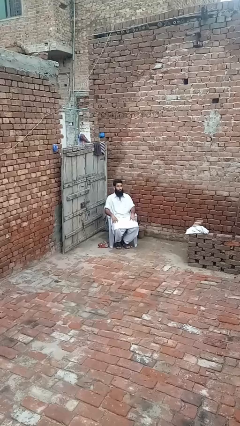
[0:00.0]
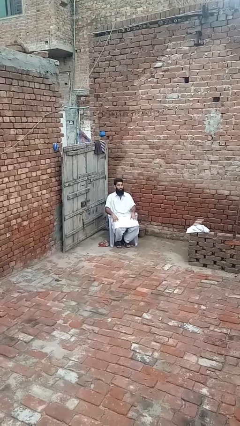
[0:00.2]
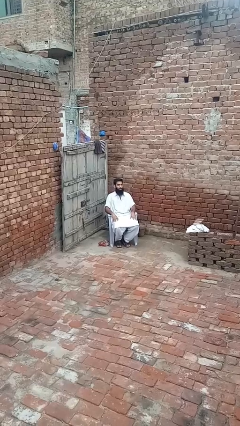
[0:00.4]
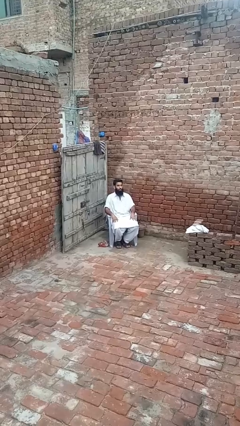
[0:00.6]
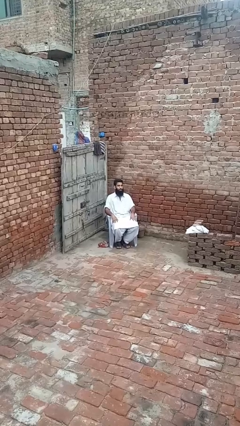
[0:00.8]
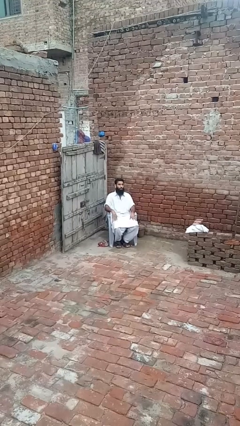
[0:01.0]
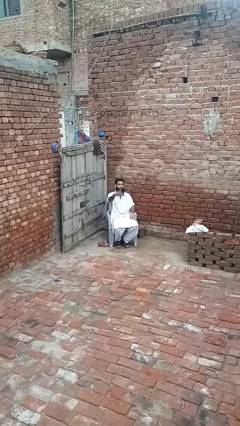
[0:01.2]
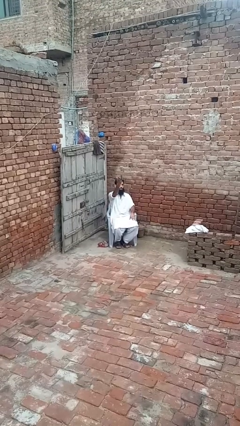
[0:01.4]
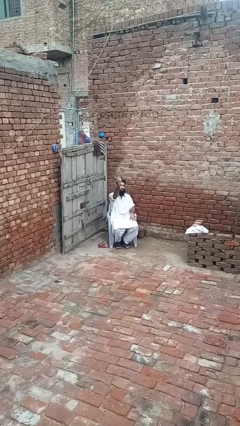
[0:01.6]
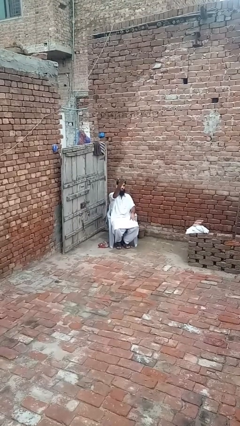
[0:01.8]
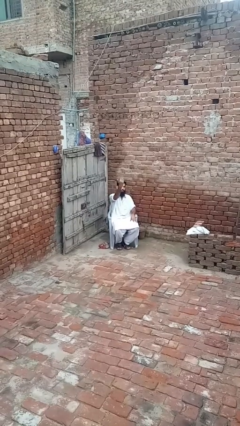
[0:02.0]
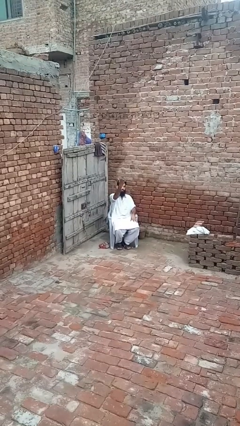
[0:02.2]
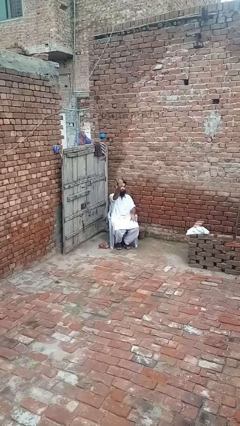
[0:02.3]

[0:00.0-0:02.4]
person gestures come here

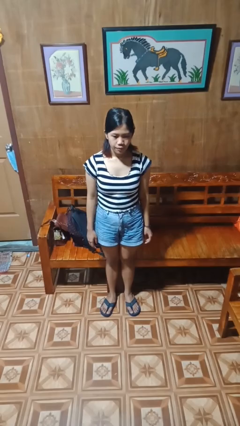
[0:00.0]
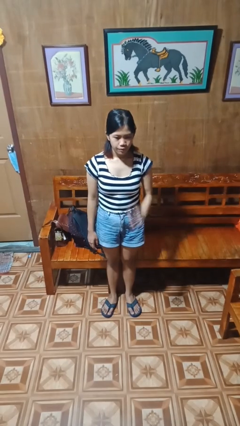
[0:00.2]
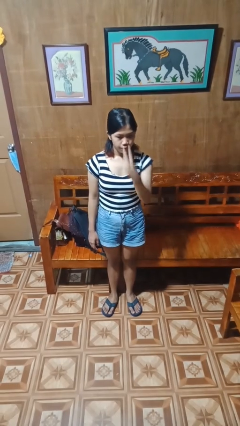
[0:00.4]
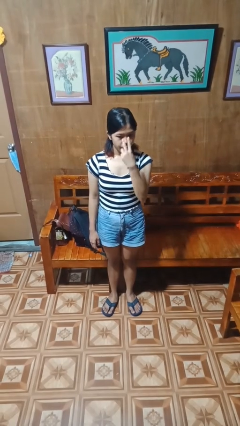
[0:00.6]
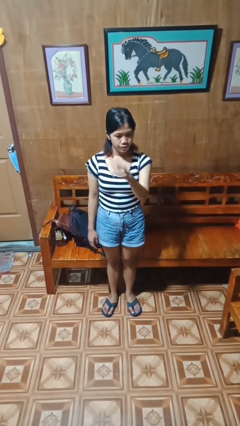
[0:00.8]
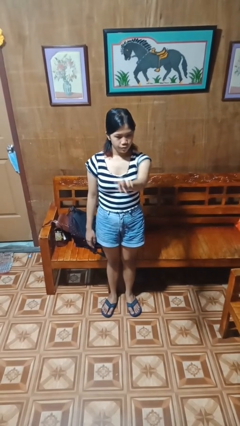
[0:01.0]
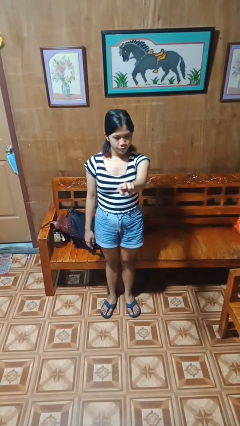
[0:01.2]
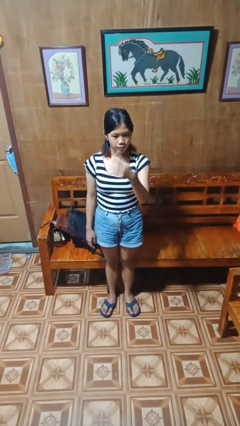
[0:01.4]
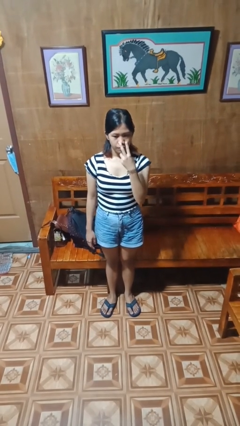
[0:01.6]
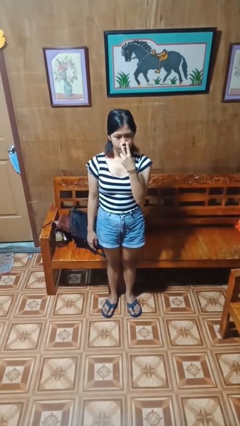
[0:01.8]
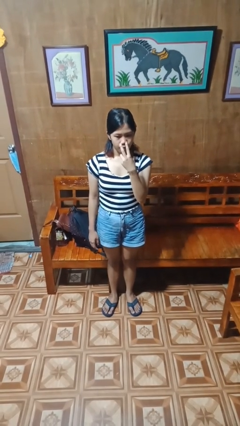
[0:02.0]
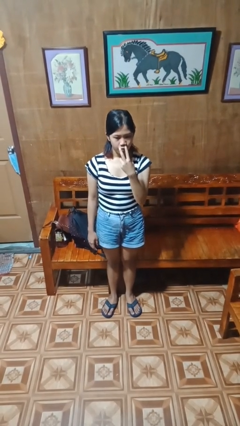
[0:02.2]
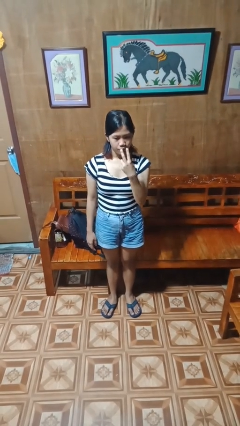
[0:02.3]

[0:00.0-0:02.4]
person gestures watch closely

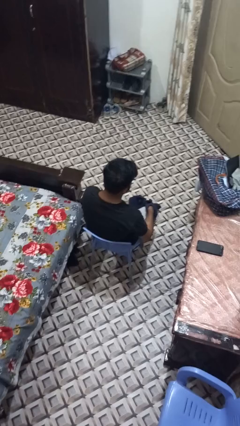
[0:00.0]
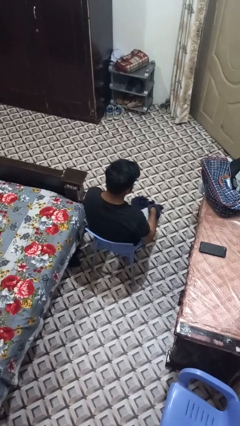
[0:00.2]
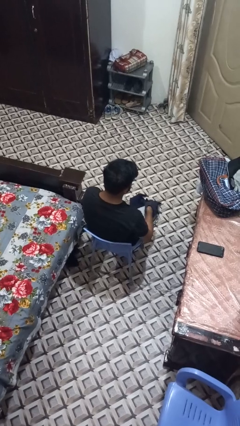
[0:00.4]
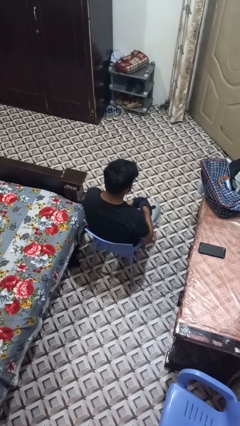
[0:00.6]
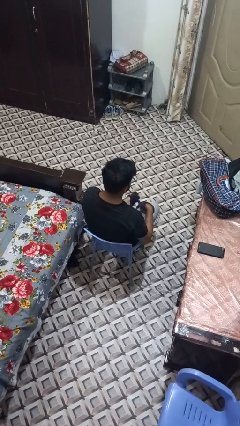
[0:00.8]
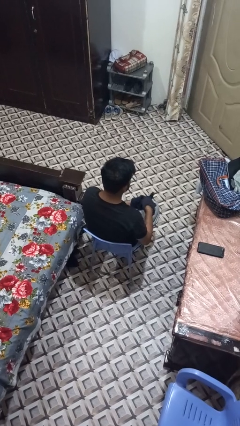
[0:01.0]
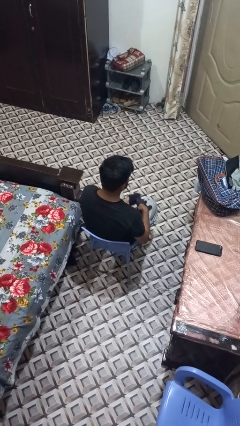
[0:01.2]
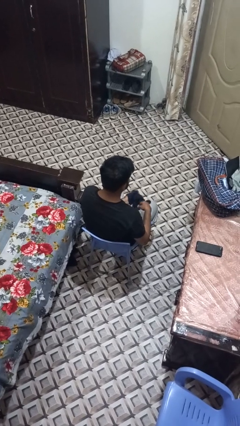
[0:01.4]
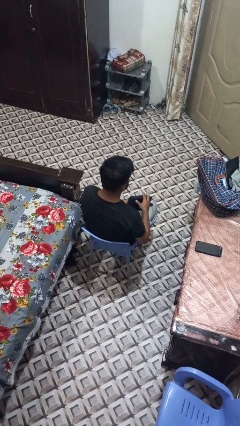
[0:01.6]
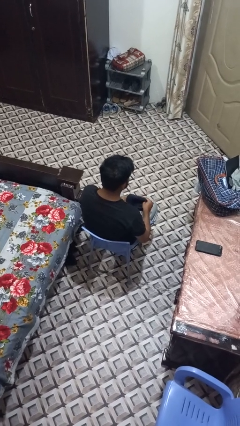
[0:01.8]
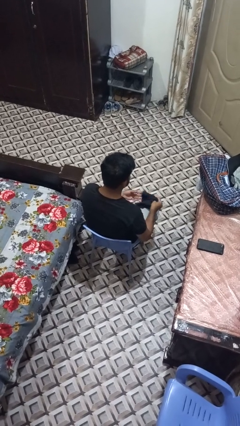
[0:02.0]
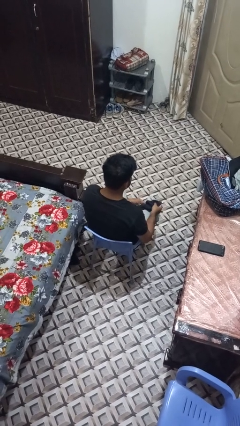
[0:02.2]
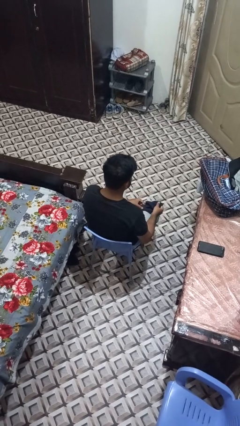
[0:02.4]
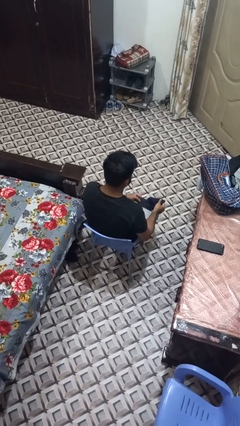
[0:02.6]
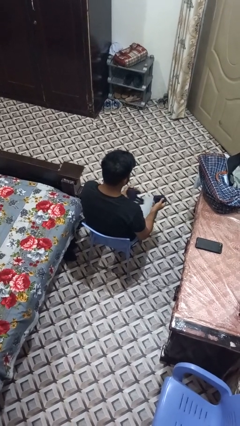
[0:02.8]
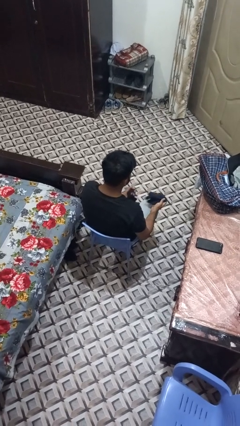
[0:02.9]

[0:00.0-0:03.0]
person takes off gloves

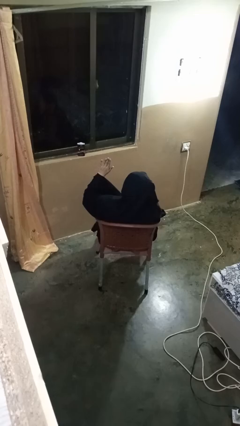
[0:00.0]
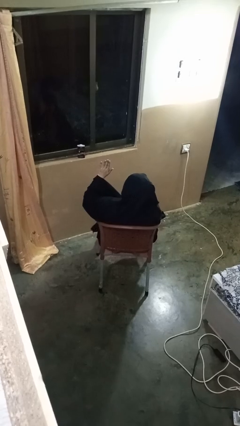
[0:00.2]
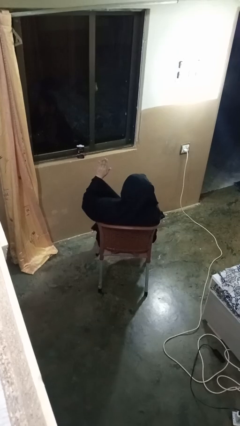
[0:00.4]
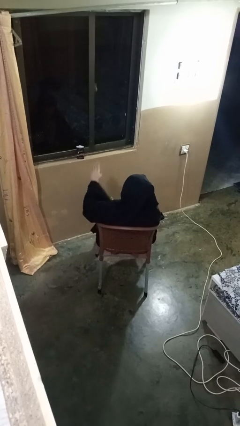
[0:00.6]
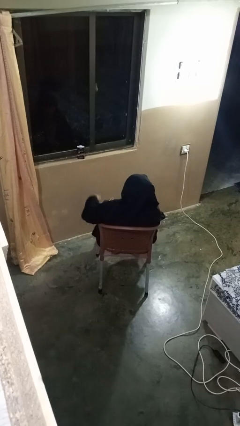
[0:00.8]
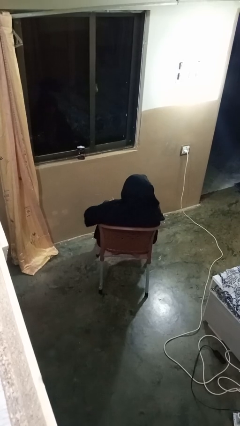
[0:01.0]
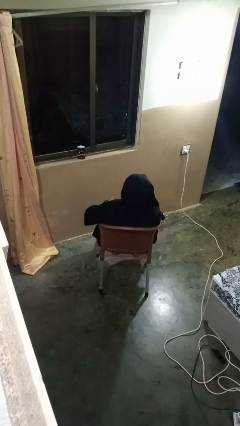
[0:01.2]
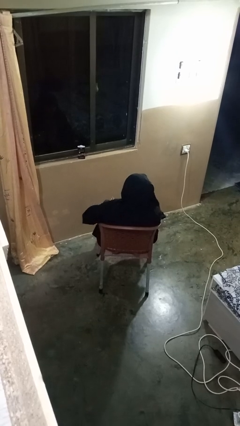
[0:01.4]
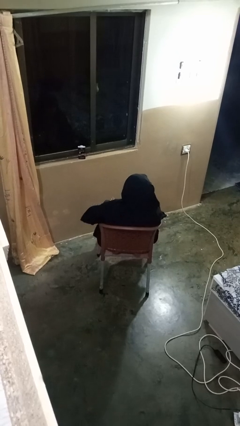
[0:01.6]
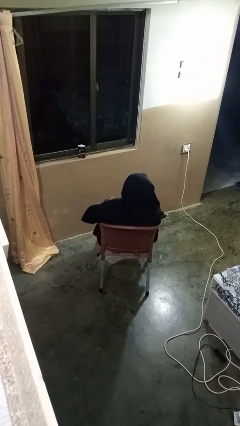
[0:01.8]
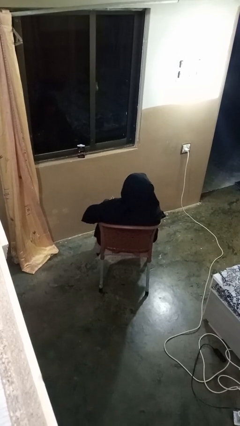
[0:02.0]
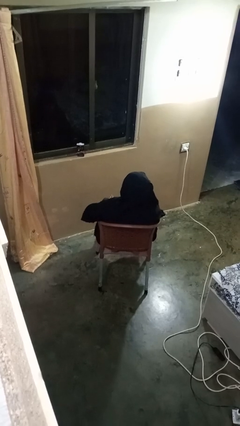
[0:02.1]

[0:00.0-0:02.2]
person gestures lower hand

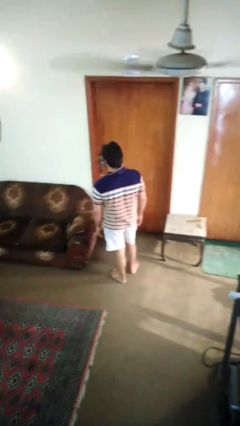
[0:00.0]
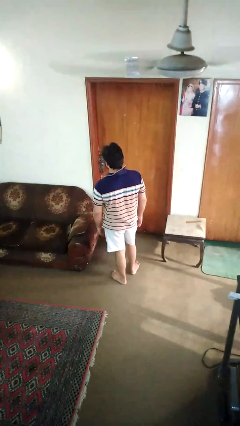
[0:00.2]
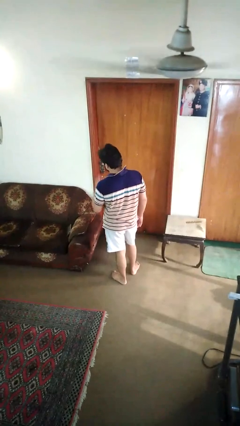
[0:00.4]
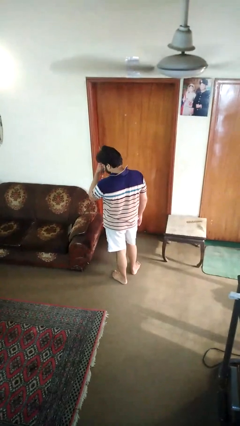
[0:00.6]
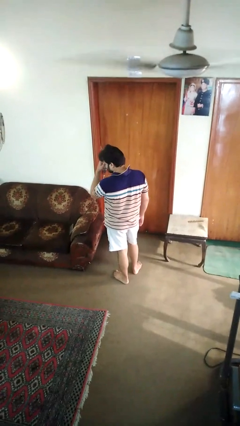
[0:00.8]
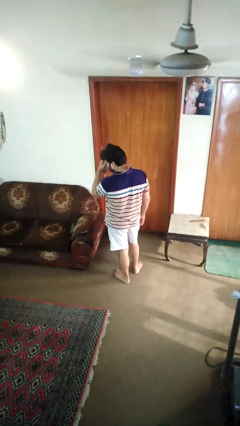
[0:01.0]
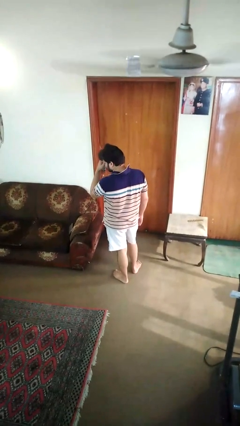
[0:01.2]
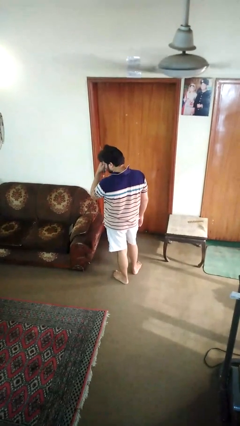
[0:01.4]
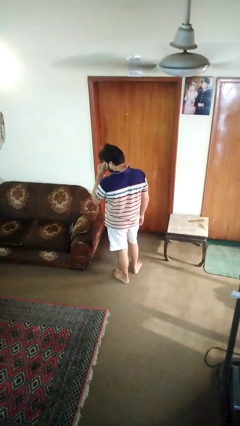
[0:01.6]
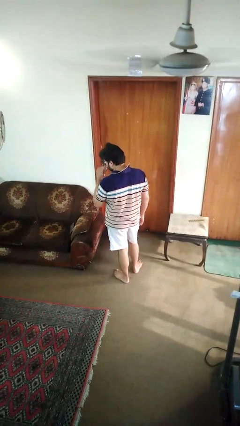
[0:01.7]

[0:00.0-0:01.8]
person rubs eyes

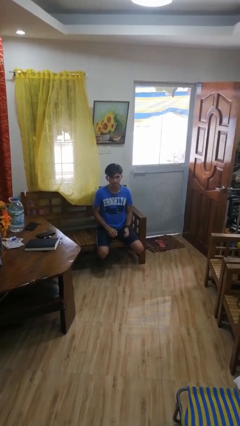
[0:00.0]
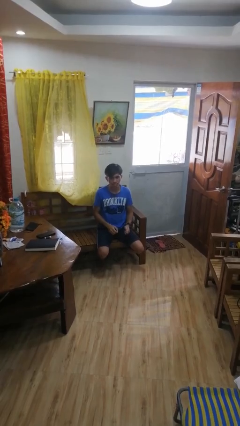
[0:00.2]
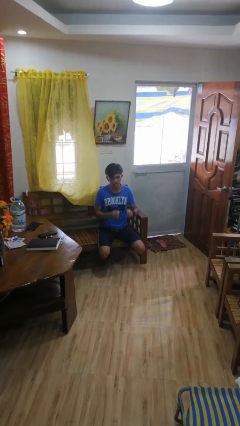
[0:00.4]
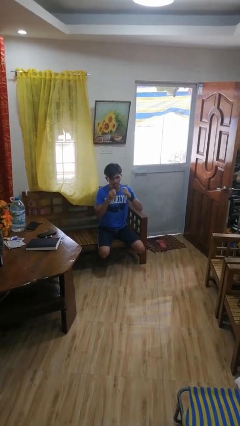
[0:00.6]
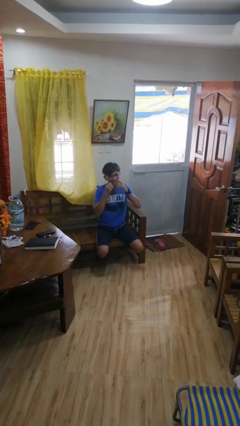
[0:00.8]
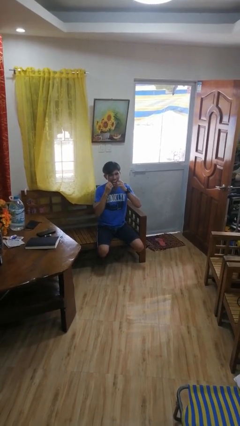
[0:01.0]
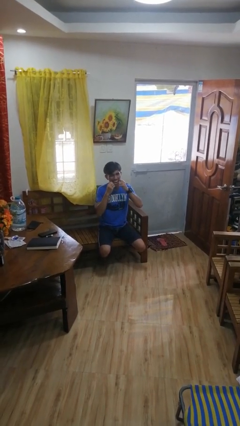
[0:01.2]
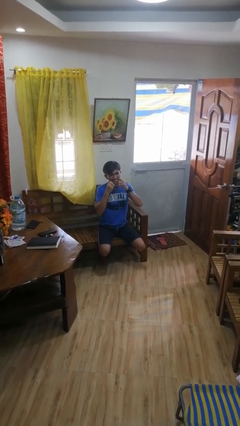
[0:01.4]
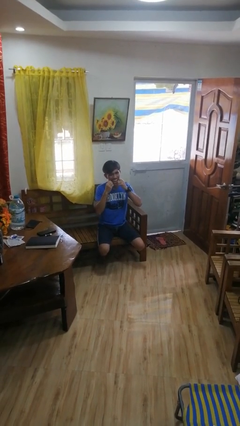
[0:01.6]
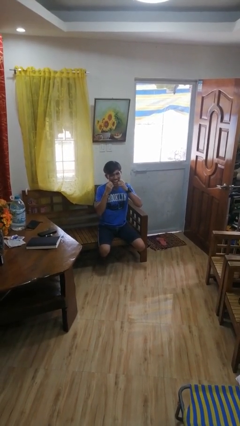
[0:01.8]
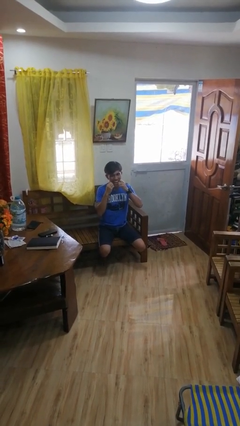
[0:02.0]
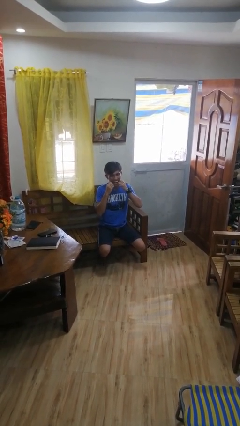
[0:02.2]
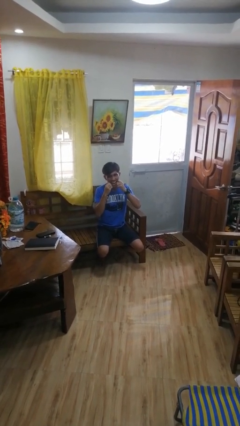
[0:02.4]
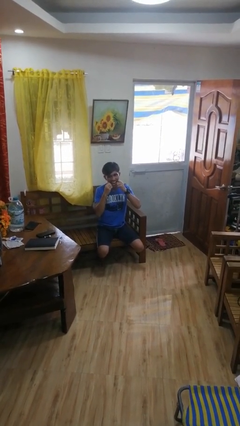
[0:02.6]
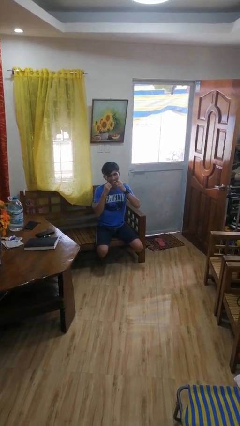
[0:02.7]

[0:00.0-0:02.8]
person flosses

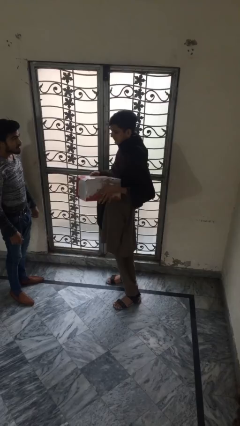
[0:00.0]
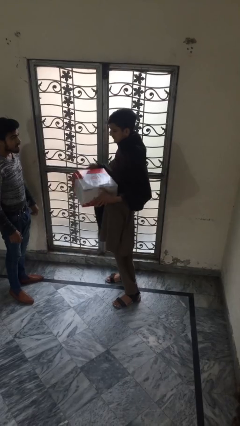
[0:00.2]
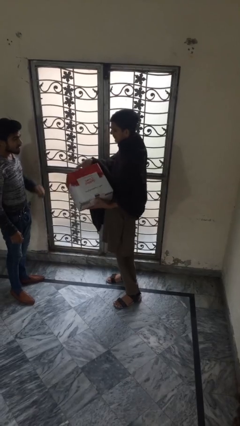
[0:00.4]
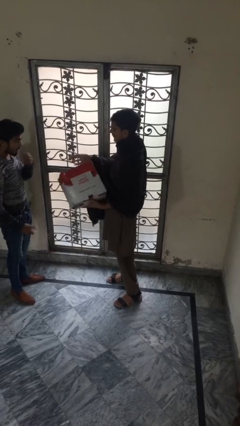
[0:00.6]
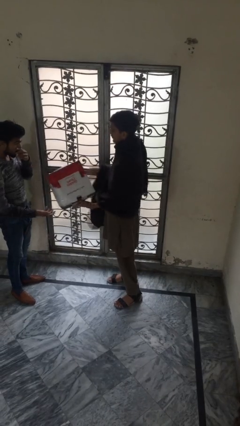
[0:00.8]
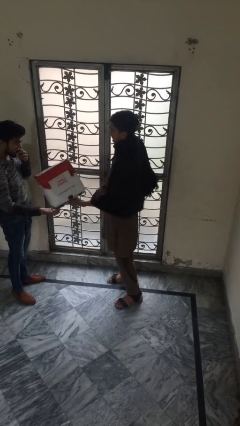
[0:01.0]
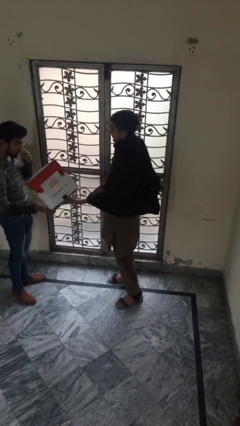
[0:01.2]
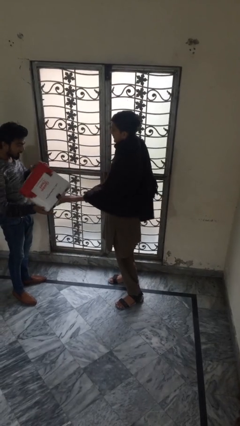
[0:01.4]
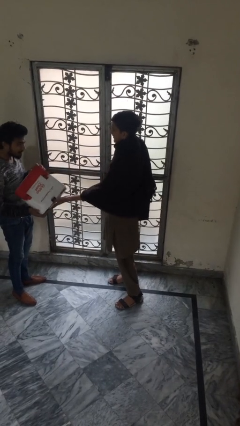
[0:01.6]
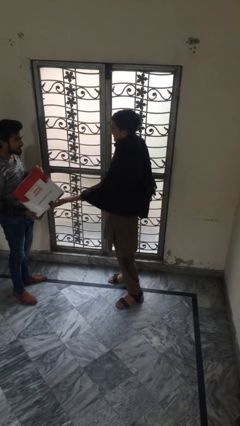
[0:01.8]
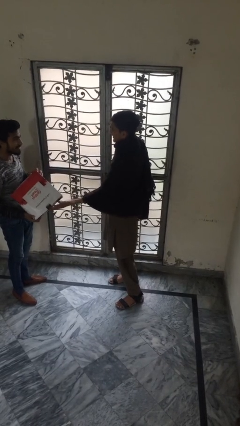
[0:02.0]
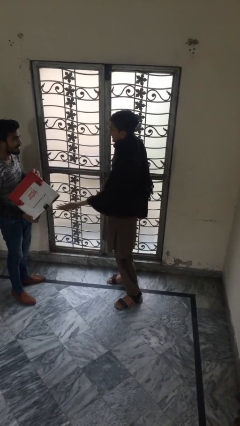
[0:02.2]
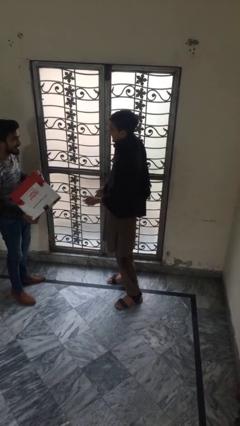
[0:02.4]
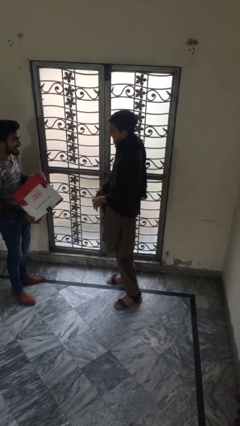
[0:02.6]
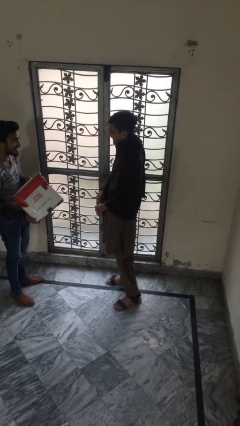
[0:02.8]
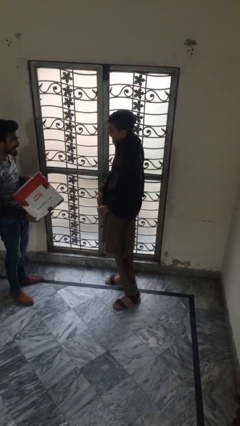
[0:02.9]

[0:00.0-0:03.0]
person transfers object to person
